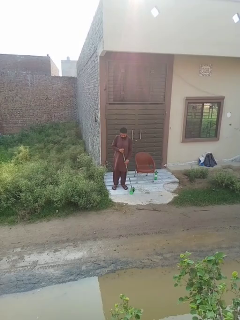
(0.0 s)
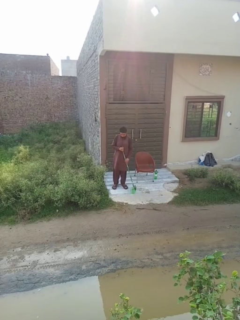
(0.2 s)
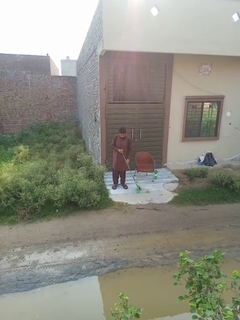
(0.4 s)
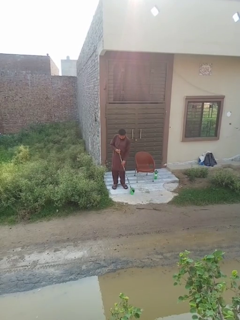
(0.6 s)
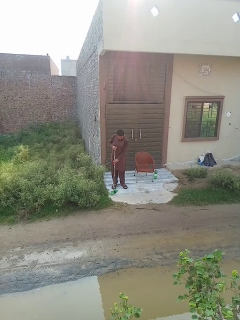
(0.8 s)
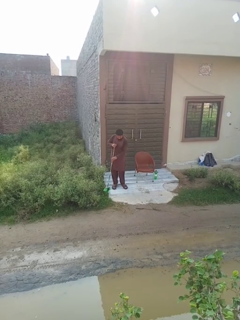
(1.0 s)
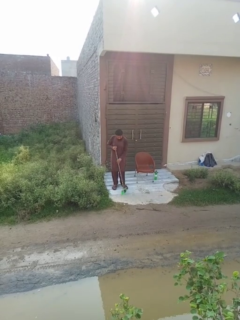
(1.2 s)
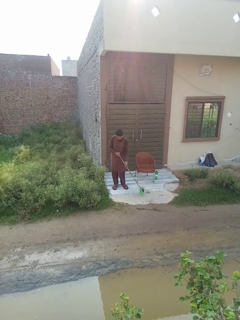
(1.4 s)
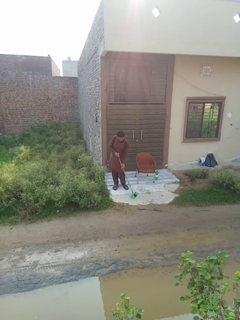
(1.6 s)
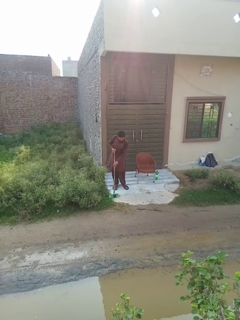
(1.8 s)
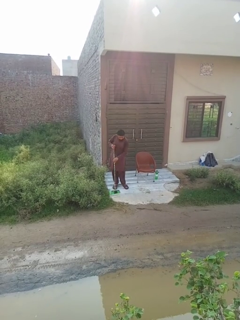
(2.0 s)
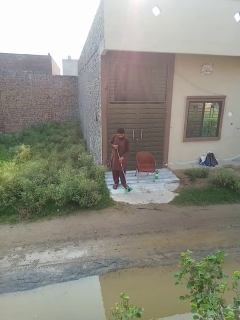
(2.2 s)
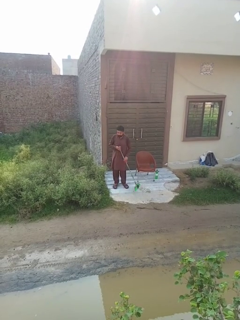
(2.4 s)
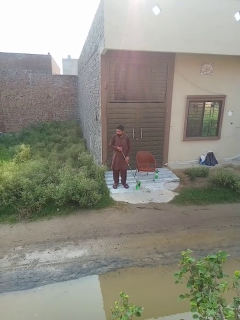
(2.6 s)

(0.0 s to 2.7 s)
person sweeps floor

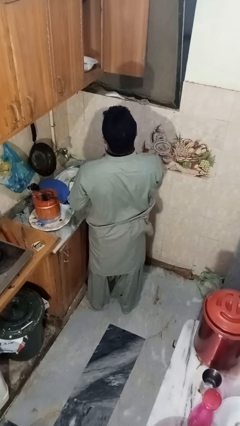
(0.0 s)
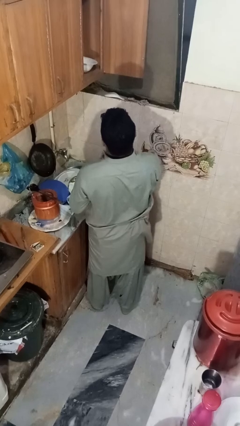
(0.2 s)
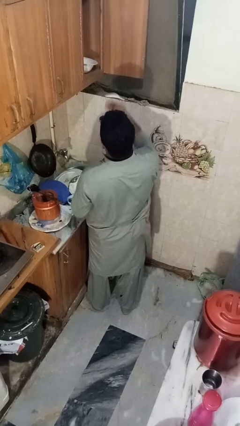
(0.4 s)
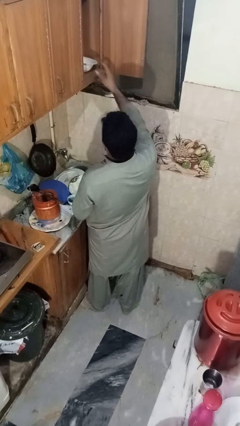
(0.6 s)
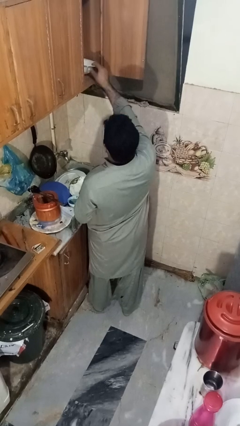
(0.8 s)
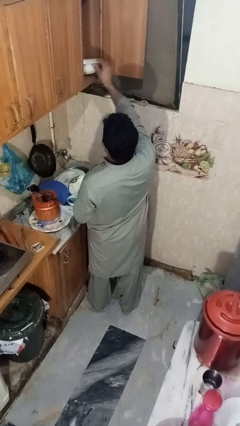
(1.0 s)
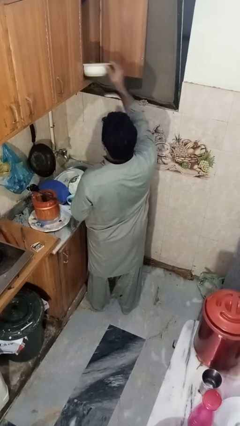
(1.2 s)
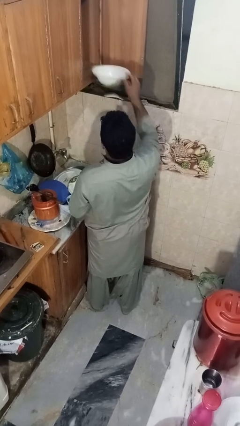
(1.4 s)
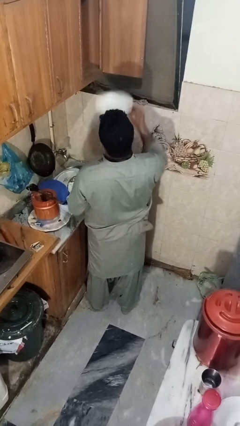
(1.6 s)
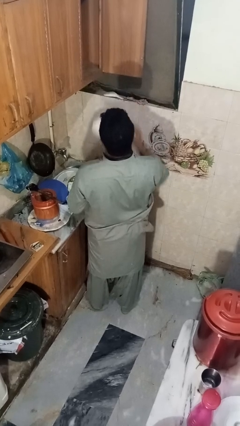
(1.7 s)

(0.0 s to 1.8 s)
person takes object from cabinet

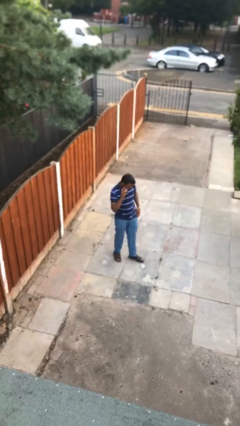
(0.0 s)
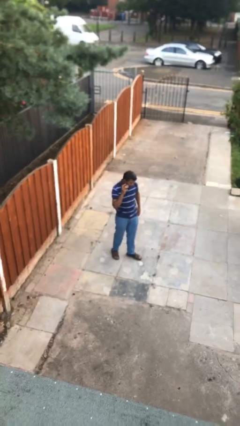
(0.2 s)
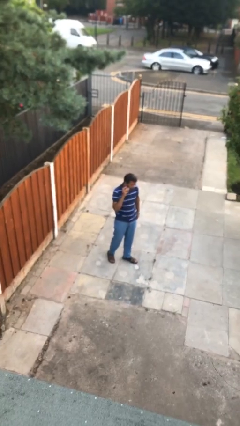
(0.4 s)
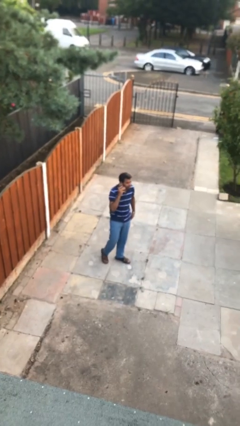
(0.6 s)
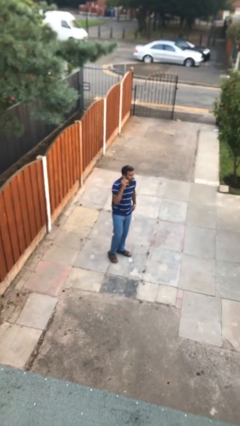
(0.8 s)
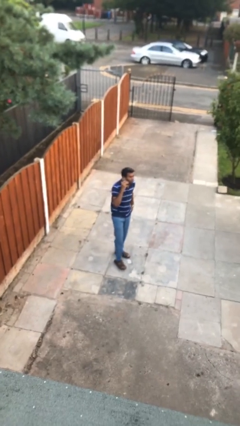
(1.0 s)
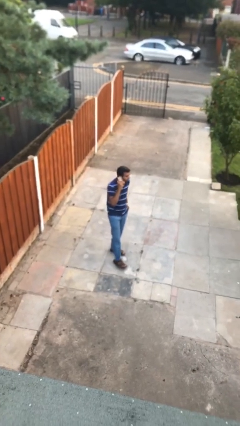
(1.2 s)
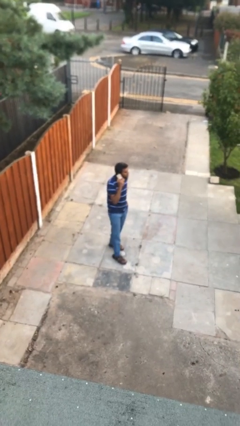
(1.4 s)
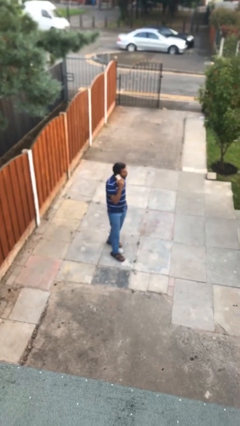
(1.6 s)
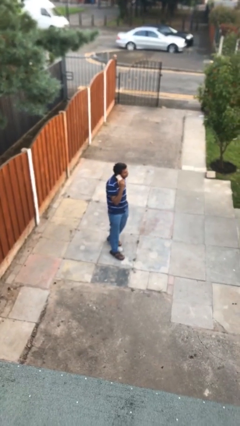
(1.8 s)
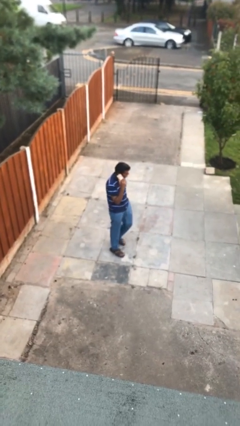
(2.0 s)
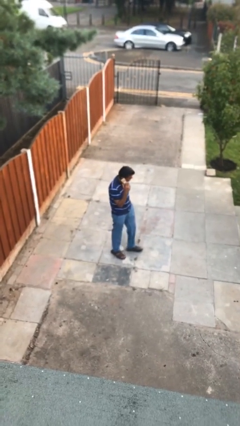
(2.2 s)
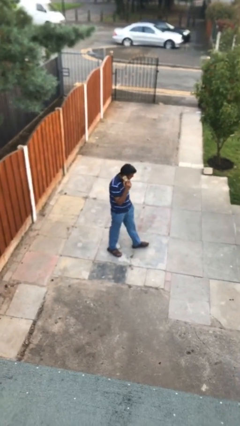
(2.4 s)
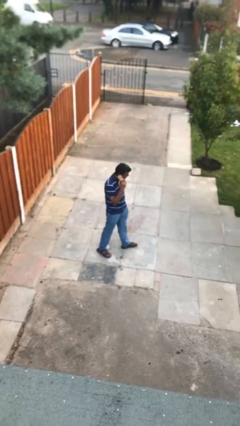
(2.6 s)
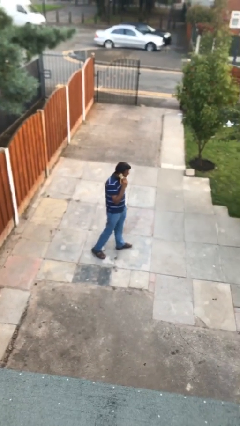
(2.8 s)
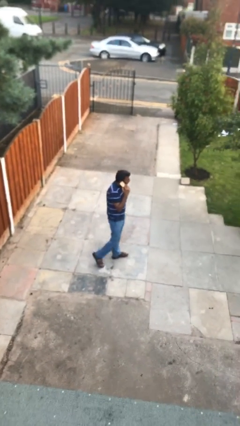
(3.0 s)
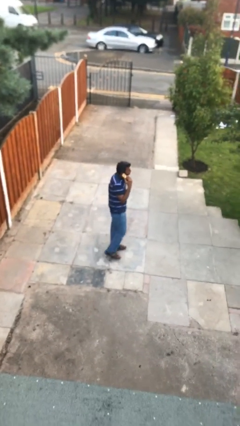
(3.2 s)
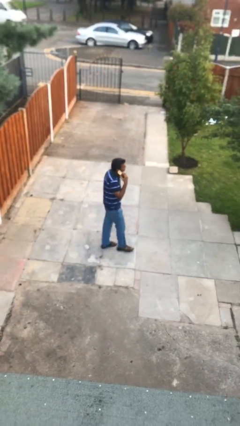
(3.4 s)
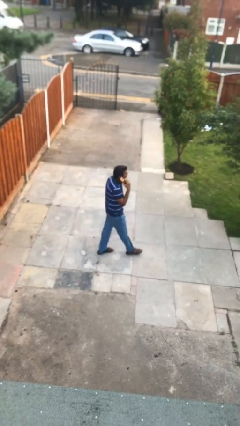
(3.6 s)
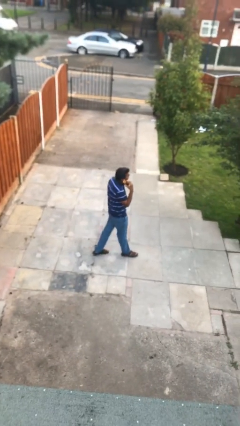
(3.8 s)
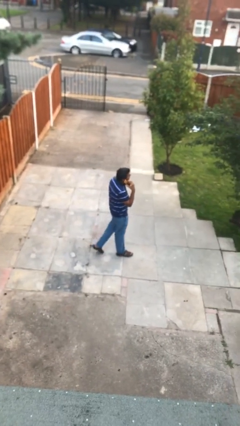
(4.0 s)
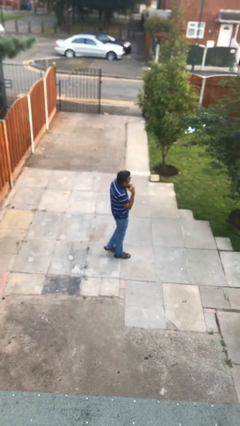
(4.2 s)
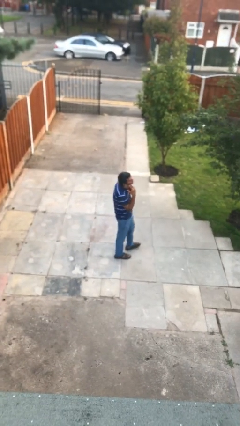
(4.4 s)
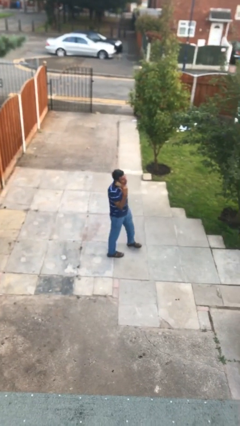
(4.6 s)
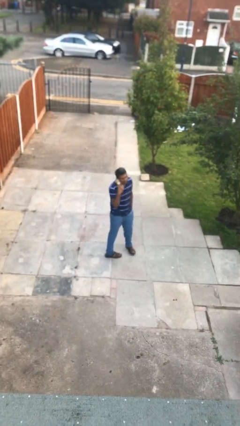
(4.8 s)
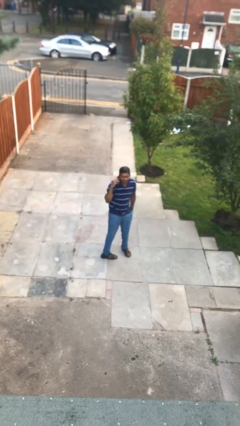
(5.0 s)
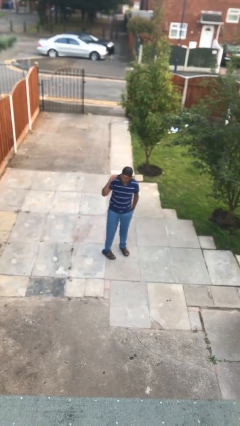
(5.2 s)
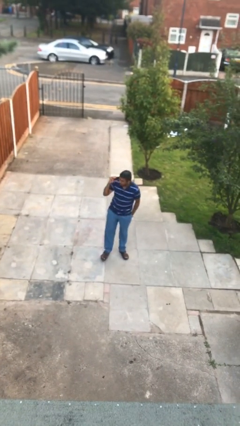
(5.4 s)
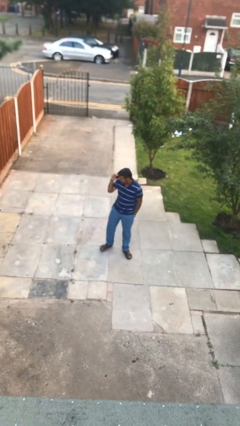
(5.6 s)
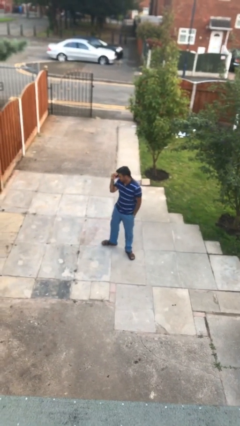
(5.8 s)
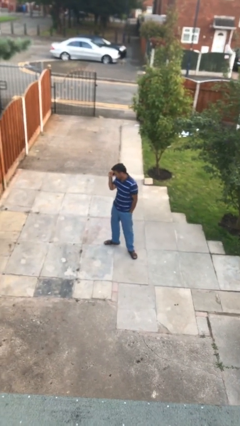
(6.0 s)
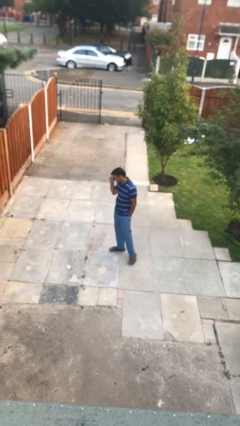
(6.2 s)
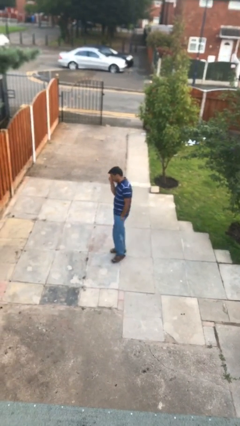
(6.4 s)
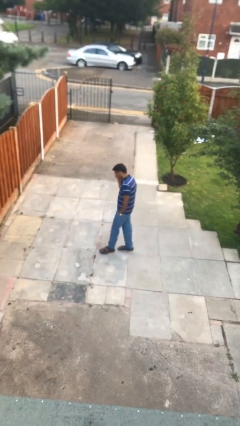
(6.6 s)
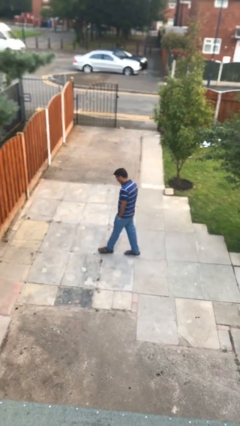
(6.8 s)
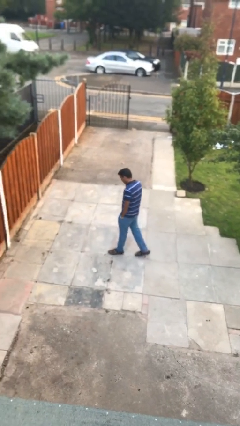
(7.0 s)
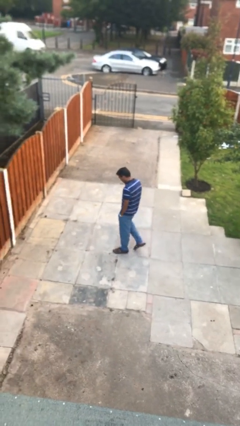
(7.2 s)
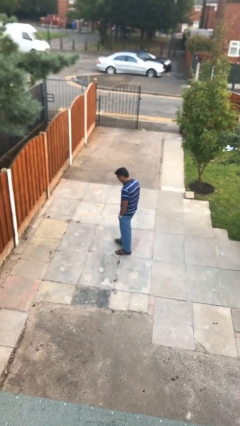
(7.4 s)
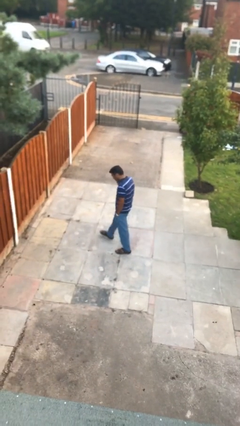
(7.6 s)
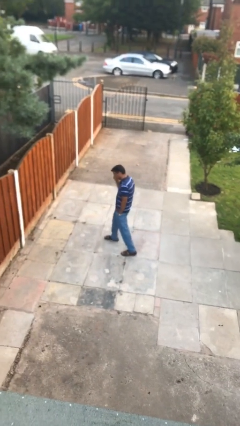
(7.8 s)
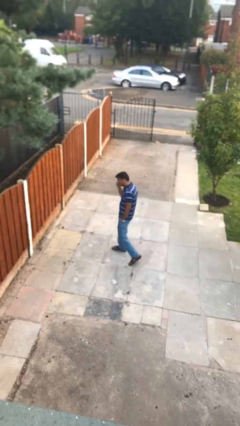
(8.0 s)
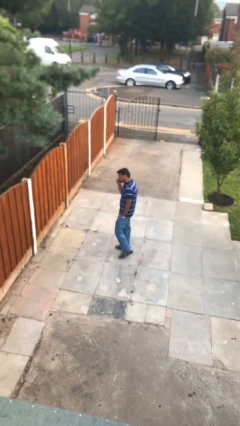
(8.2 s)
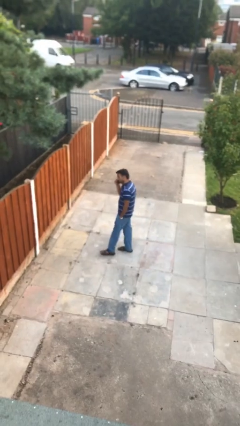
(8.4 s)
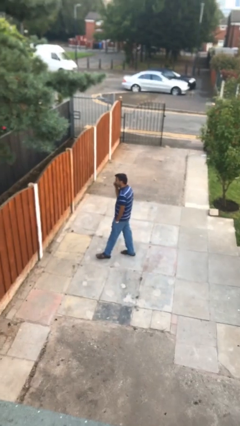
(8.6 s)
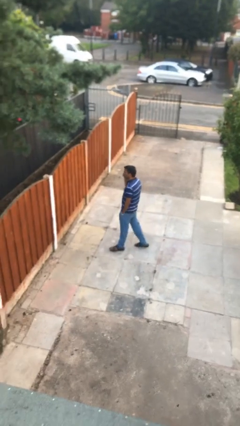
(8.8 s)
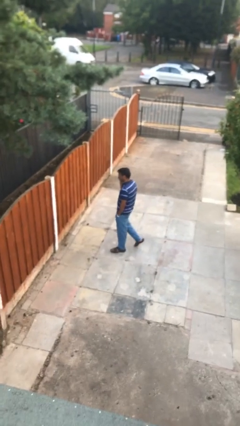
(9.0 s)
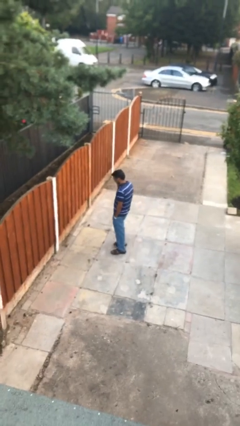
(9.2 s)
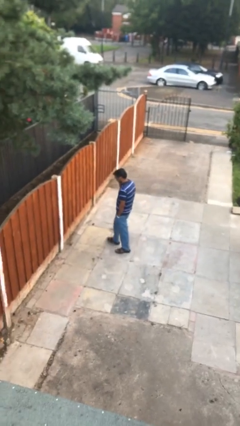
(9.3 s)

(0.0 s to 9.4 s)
person talks on phone

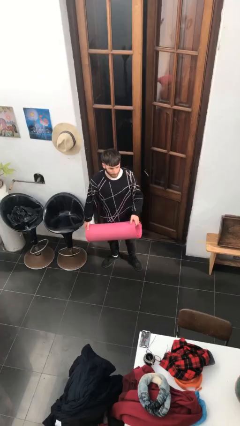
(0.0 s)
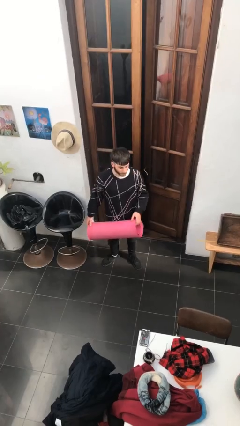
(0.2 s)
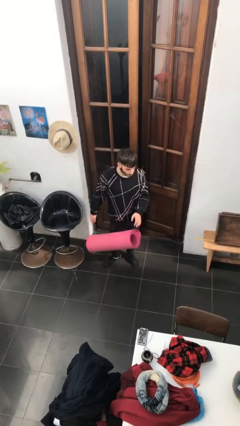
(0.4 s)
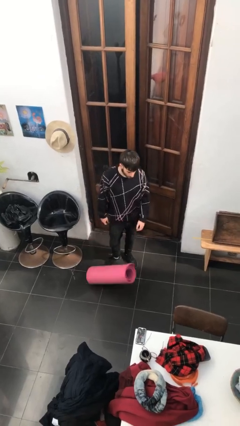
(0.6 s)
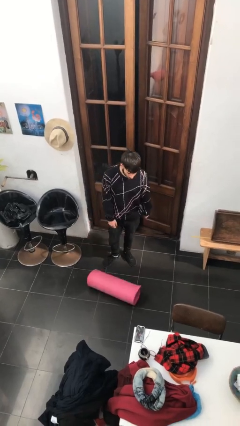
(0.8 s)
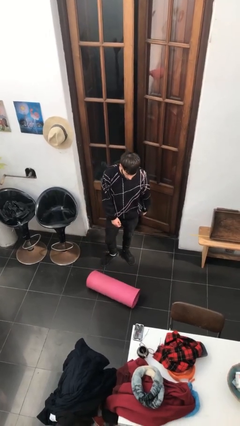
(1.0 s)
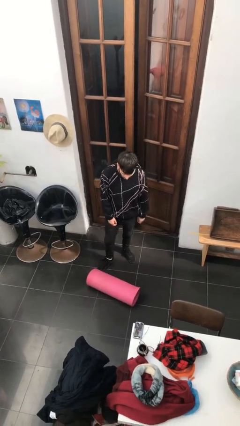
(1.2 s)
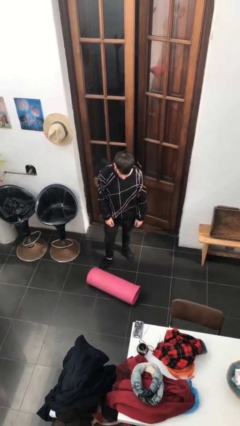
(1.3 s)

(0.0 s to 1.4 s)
person drops object

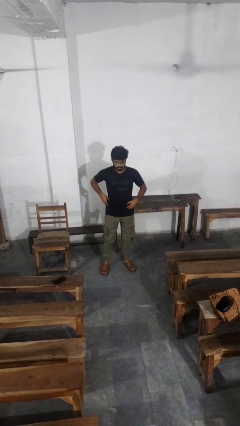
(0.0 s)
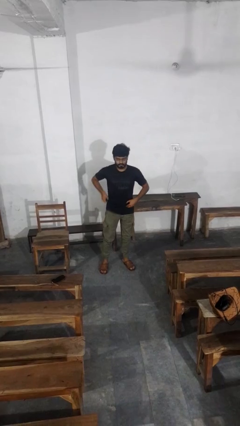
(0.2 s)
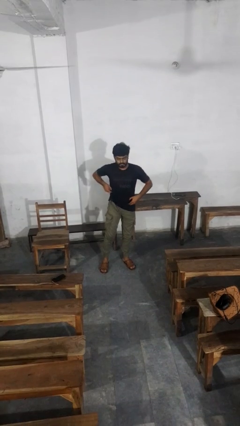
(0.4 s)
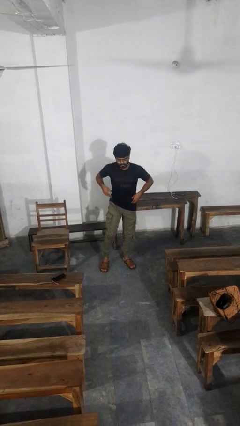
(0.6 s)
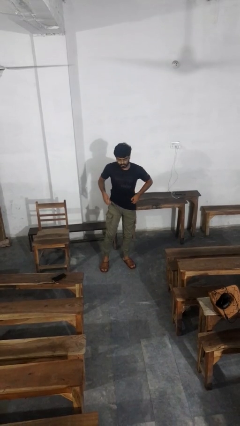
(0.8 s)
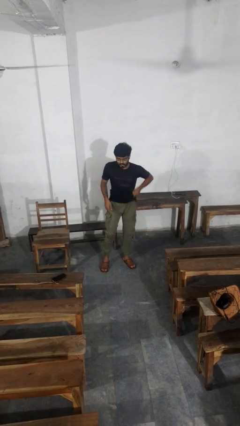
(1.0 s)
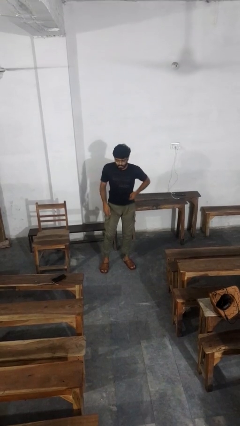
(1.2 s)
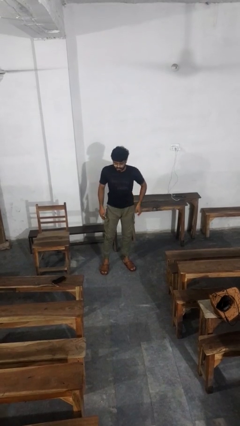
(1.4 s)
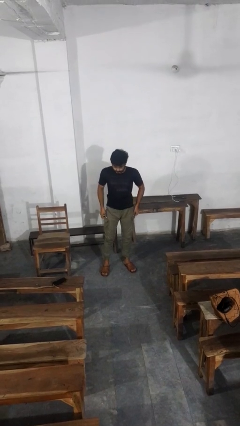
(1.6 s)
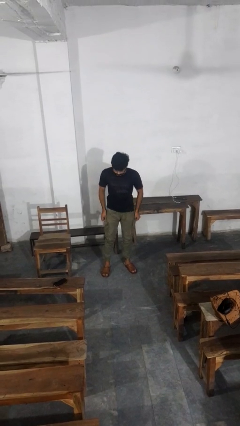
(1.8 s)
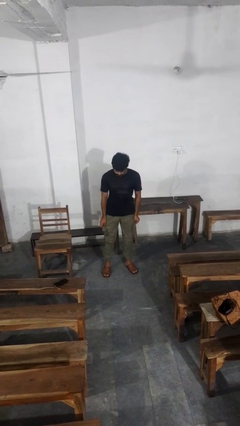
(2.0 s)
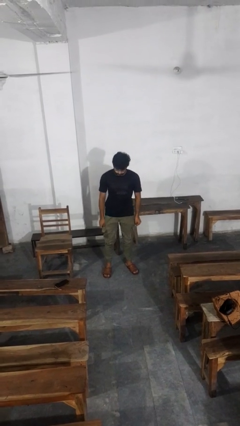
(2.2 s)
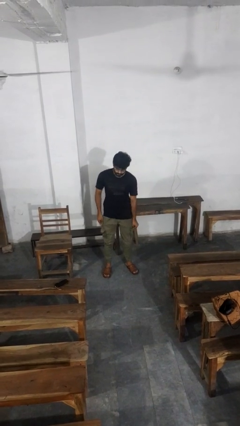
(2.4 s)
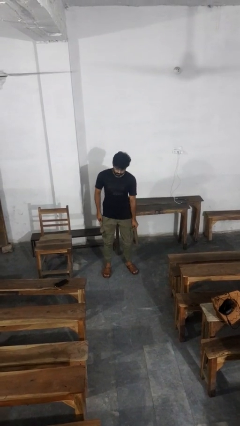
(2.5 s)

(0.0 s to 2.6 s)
person hikes up pants
